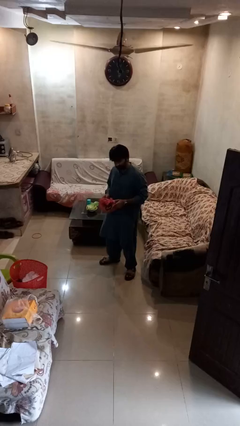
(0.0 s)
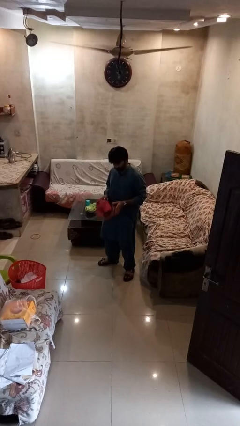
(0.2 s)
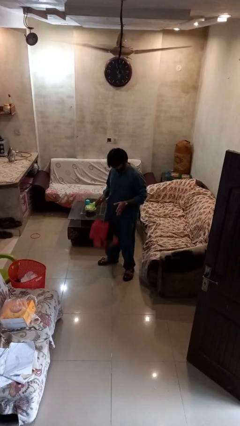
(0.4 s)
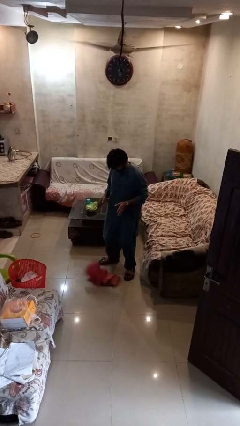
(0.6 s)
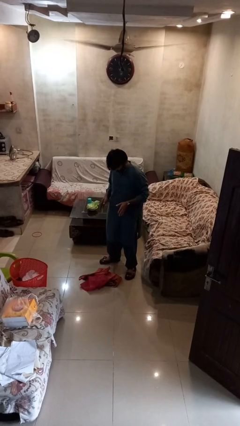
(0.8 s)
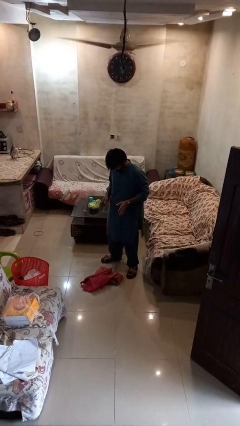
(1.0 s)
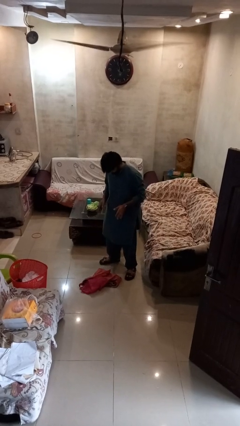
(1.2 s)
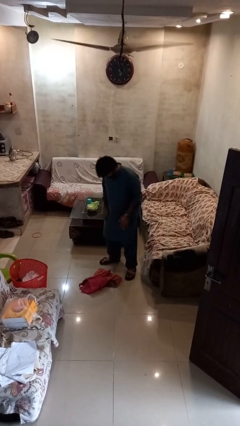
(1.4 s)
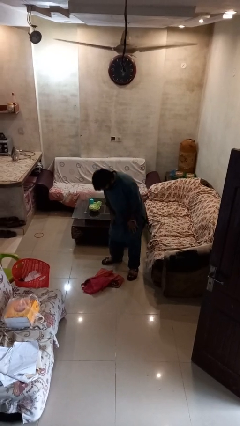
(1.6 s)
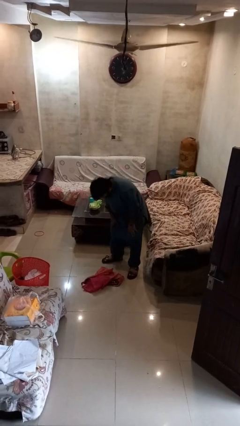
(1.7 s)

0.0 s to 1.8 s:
person drops object

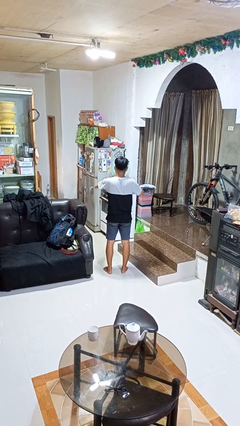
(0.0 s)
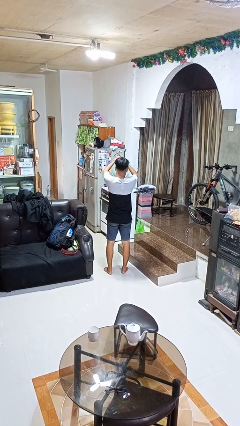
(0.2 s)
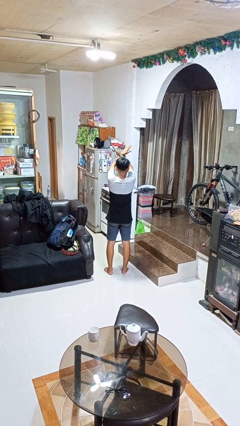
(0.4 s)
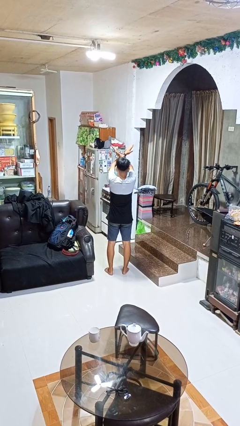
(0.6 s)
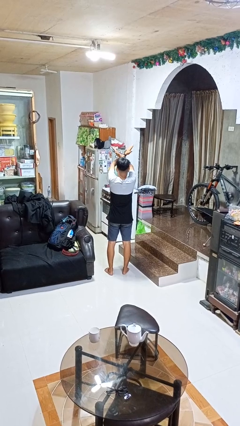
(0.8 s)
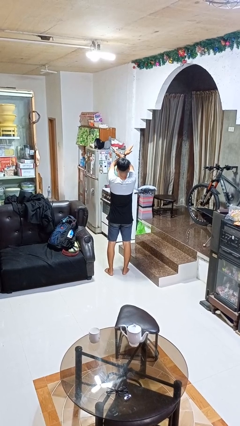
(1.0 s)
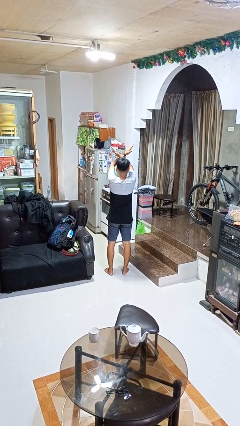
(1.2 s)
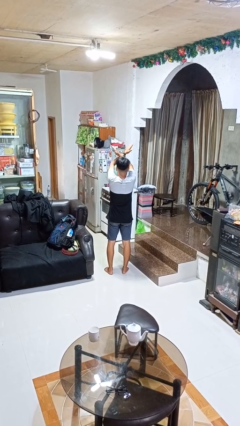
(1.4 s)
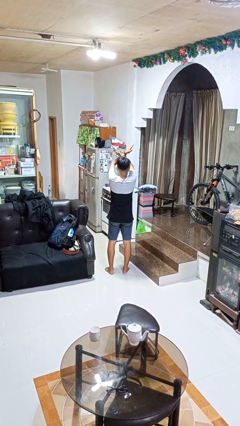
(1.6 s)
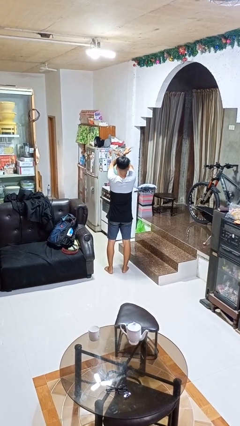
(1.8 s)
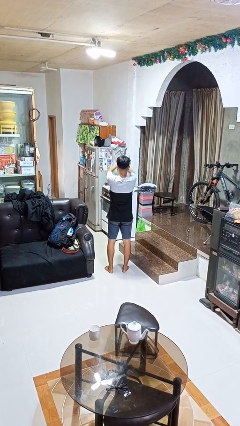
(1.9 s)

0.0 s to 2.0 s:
person gestures arms x

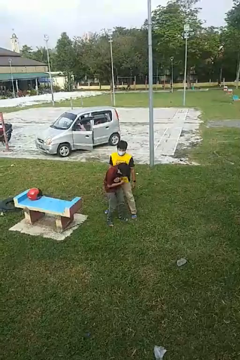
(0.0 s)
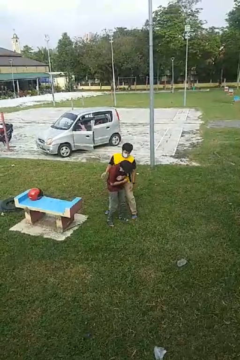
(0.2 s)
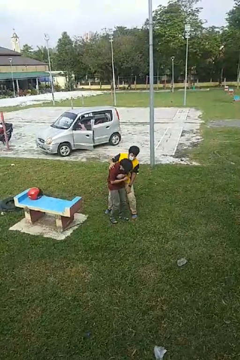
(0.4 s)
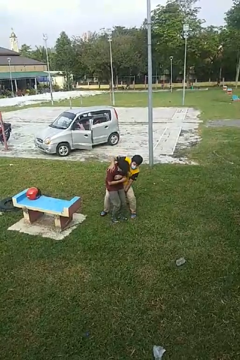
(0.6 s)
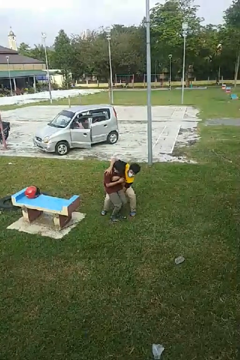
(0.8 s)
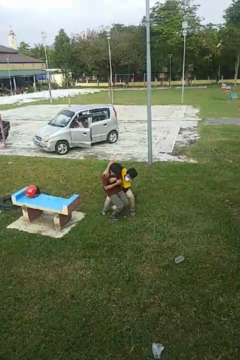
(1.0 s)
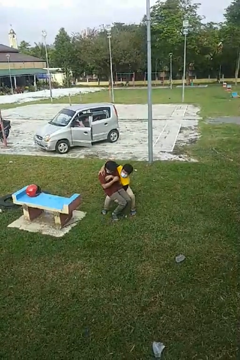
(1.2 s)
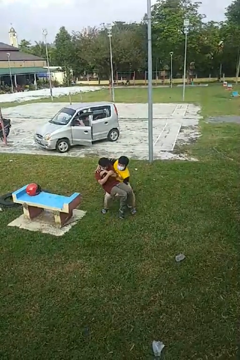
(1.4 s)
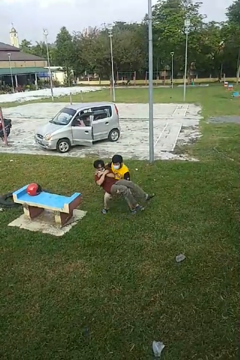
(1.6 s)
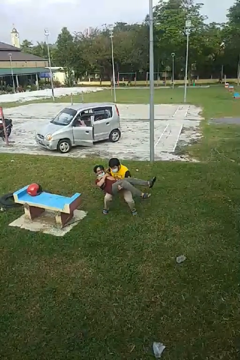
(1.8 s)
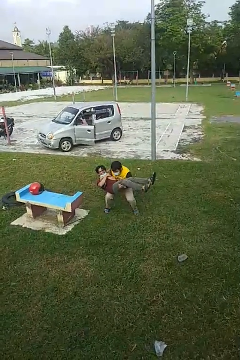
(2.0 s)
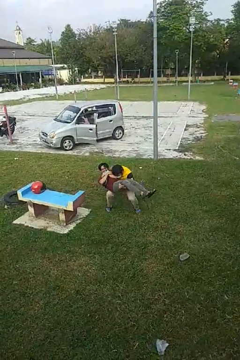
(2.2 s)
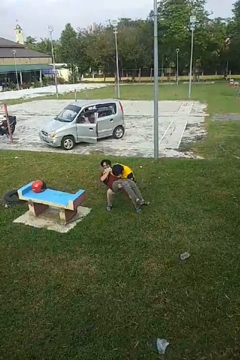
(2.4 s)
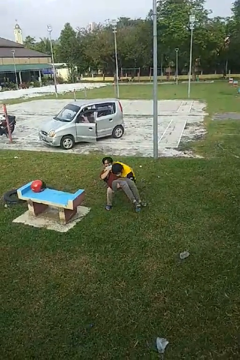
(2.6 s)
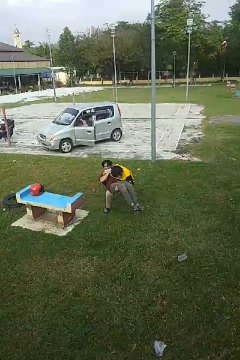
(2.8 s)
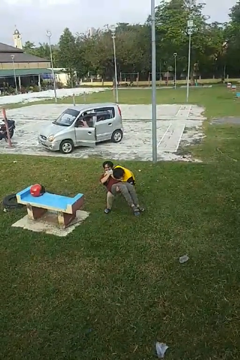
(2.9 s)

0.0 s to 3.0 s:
person picks up person

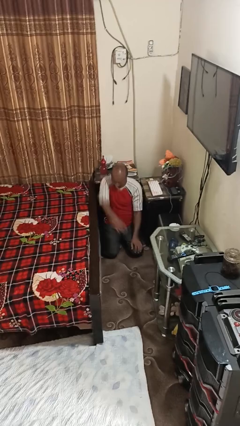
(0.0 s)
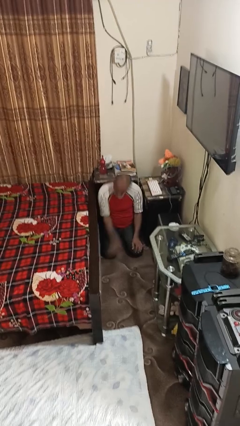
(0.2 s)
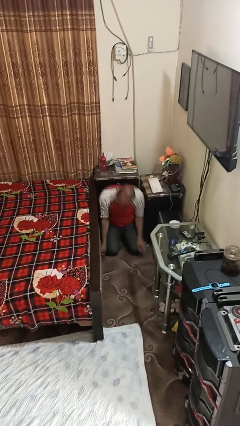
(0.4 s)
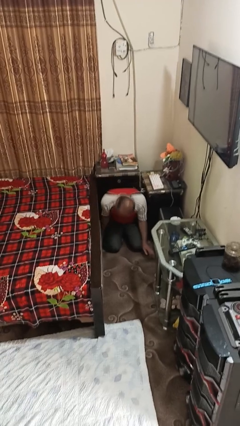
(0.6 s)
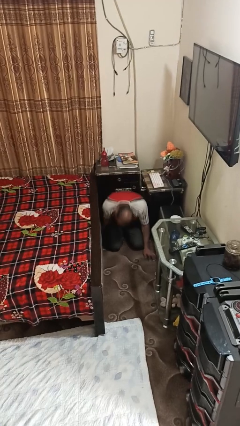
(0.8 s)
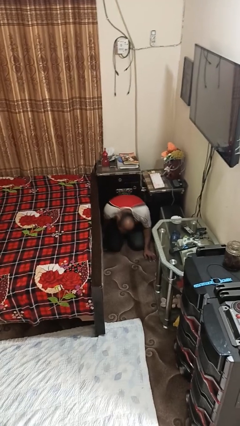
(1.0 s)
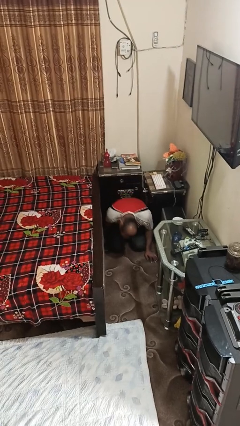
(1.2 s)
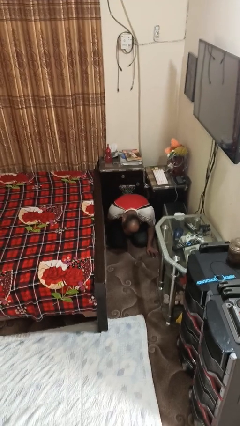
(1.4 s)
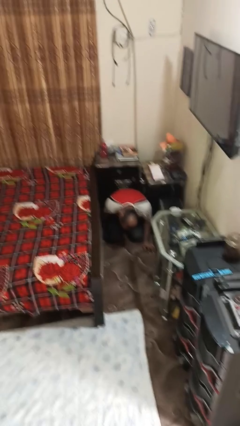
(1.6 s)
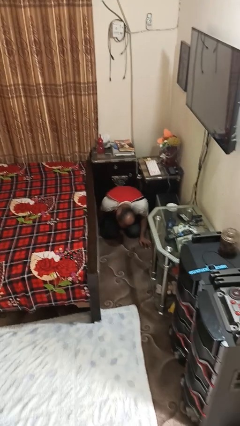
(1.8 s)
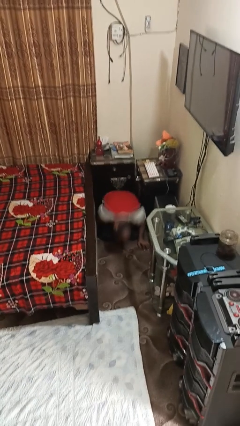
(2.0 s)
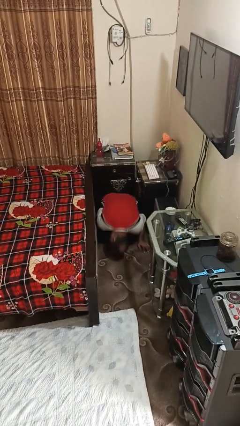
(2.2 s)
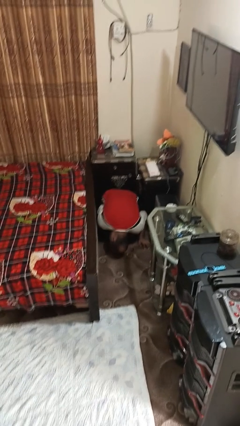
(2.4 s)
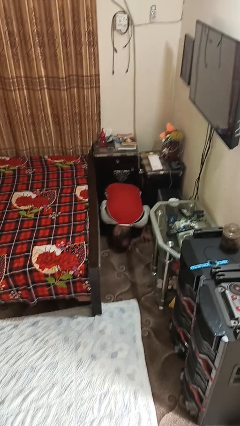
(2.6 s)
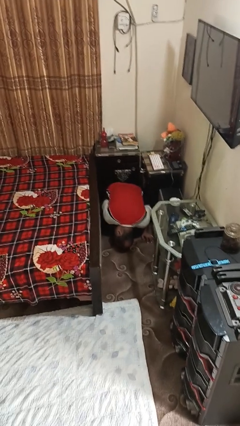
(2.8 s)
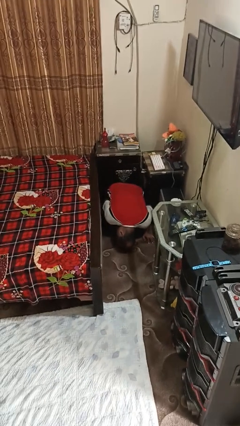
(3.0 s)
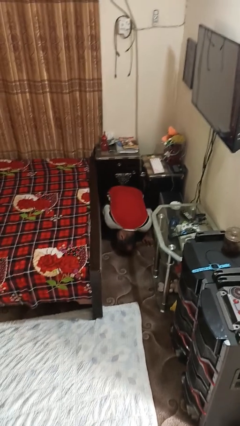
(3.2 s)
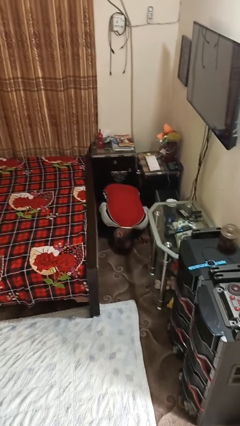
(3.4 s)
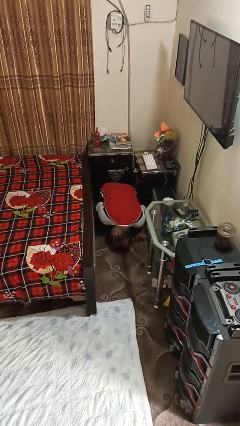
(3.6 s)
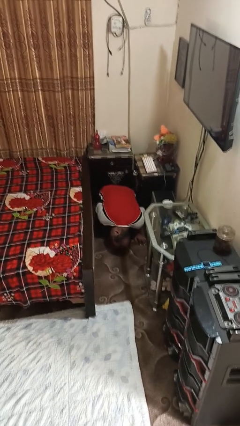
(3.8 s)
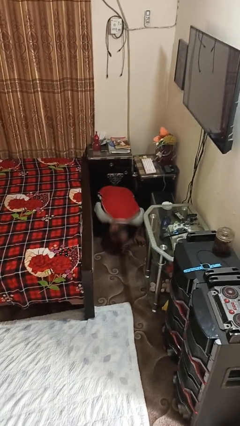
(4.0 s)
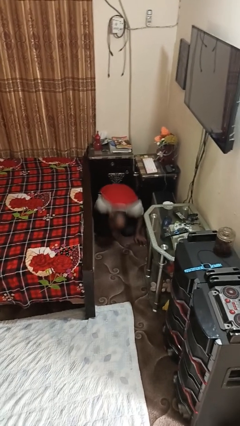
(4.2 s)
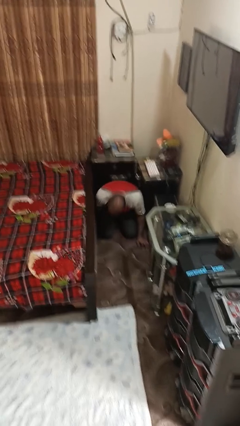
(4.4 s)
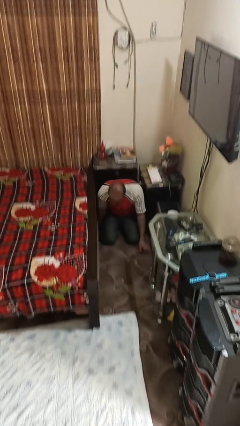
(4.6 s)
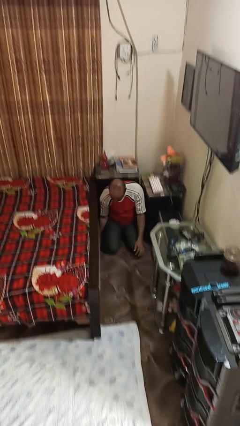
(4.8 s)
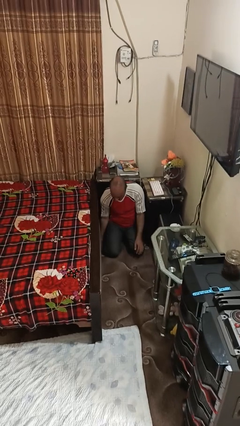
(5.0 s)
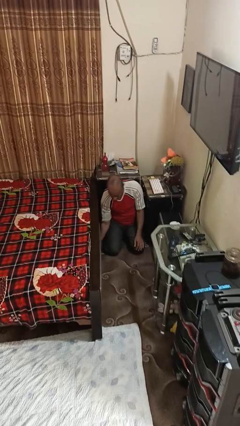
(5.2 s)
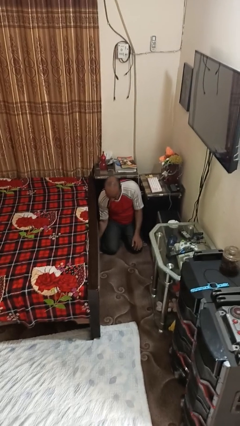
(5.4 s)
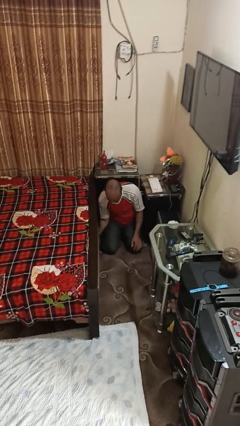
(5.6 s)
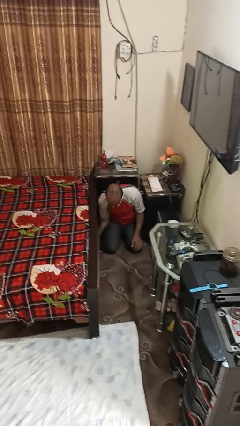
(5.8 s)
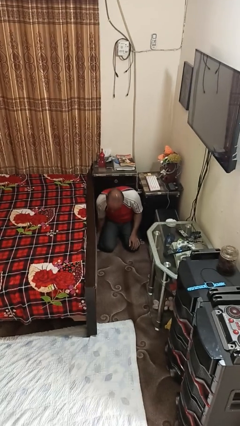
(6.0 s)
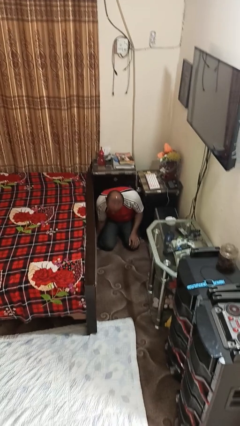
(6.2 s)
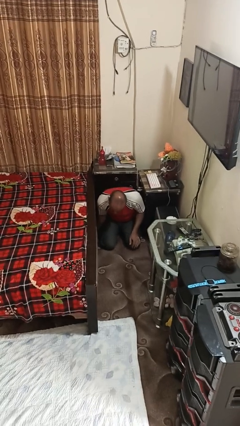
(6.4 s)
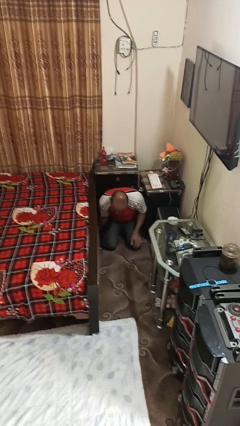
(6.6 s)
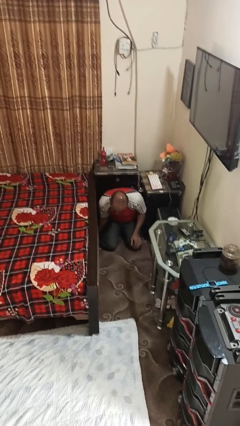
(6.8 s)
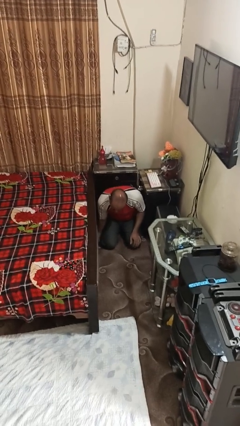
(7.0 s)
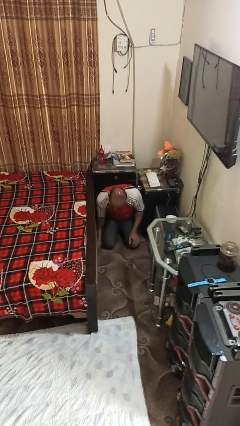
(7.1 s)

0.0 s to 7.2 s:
person searches under bed

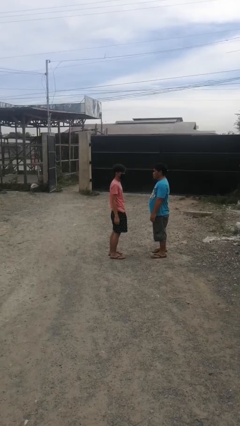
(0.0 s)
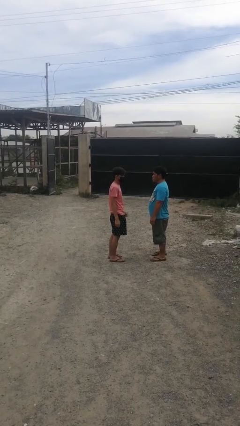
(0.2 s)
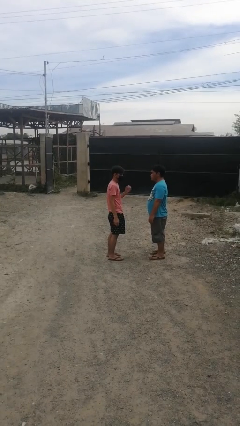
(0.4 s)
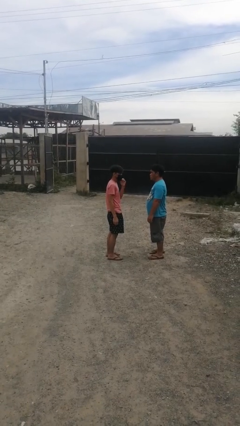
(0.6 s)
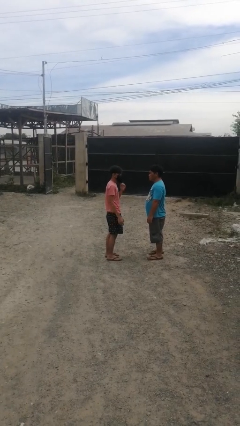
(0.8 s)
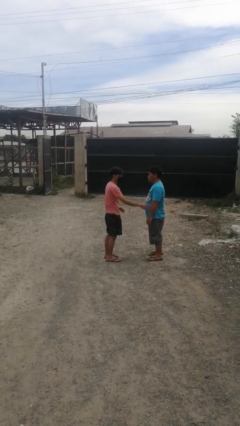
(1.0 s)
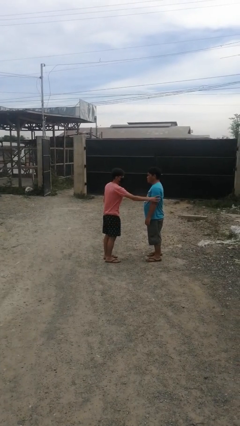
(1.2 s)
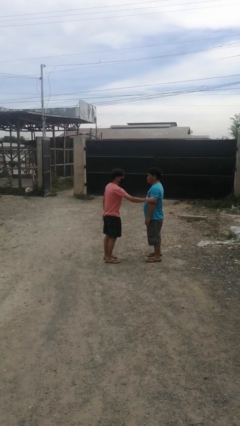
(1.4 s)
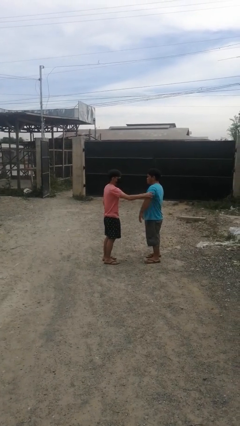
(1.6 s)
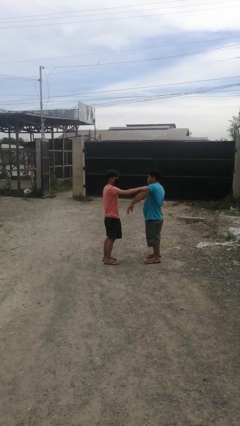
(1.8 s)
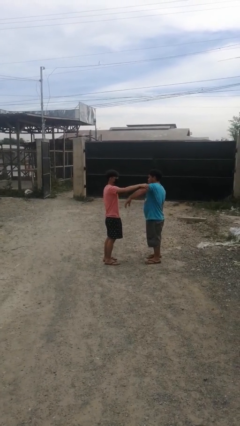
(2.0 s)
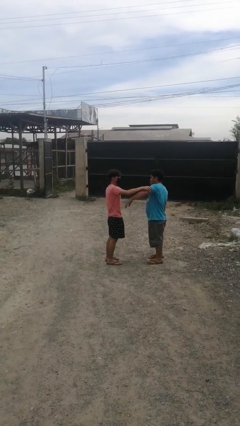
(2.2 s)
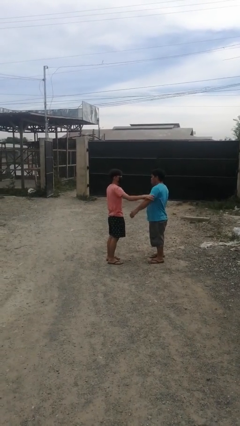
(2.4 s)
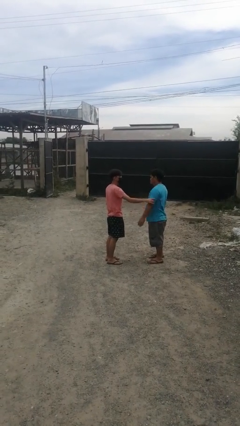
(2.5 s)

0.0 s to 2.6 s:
person grabs person by bicep

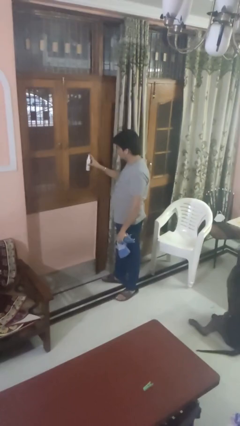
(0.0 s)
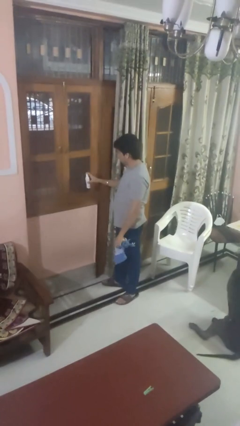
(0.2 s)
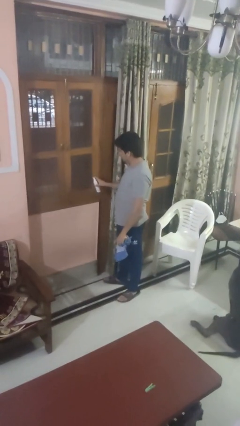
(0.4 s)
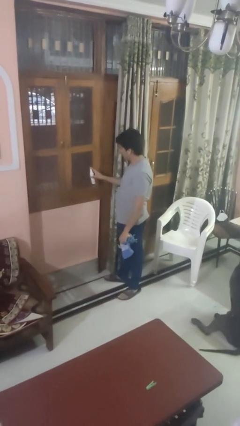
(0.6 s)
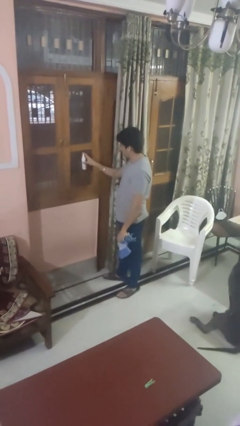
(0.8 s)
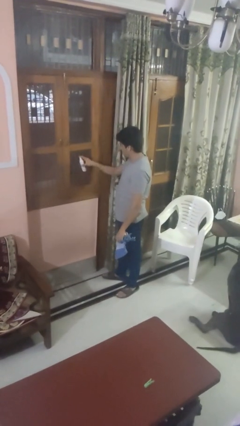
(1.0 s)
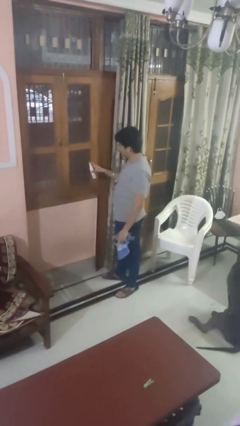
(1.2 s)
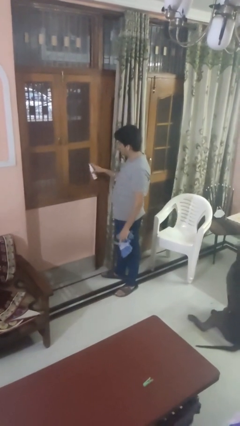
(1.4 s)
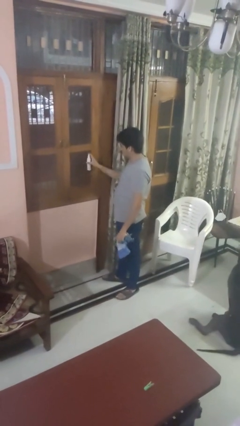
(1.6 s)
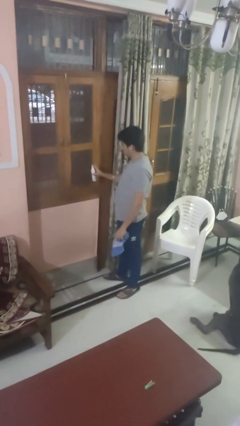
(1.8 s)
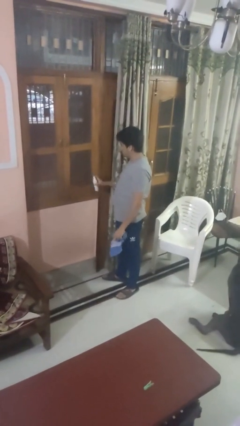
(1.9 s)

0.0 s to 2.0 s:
person sprays from bottle
